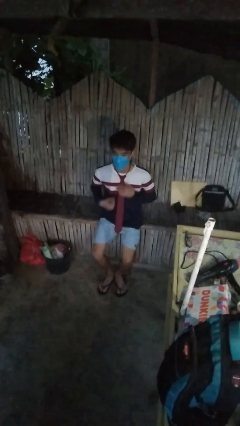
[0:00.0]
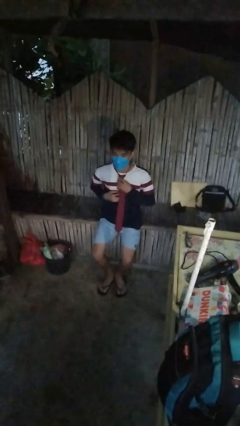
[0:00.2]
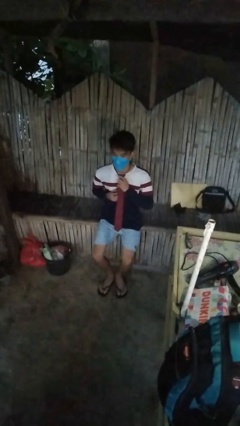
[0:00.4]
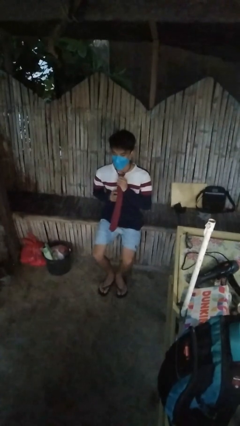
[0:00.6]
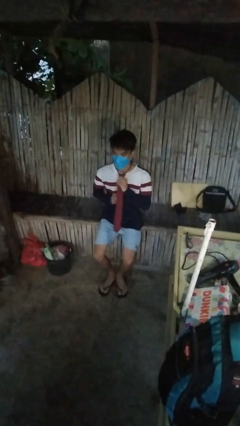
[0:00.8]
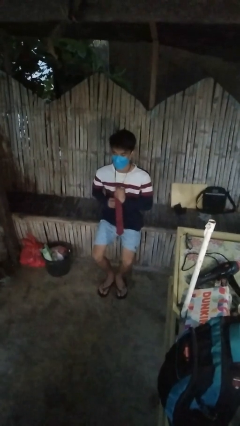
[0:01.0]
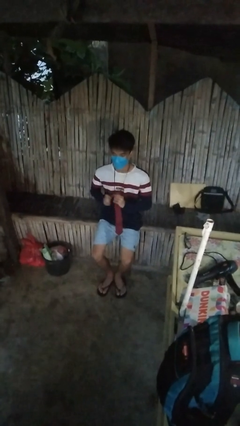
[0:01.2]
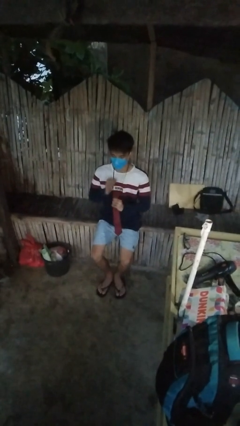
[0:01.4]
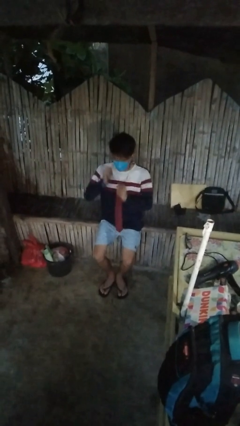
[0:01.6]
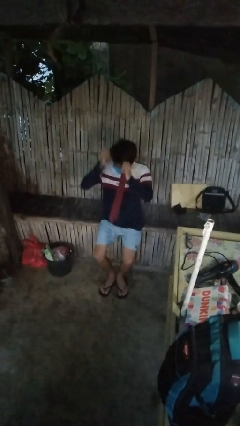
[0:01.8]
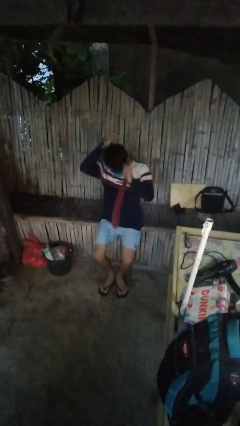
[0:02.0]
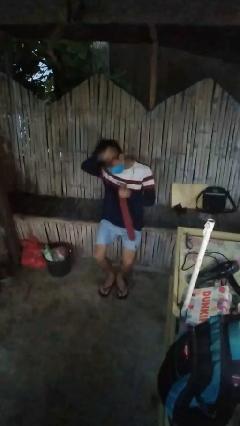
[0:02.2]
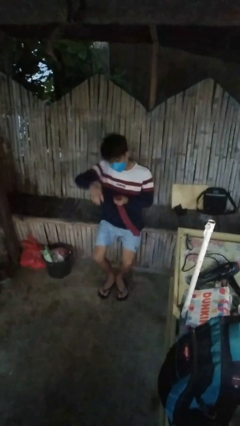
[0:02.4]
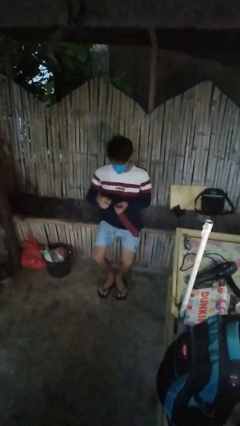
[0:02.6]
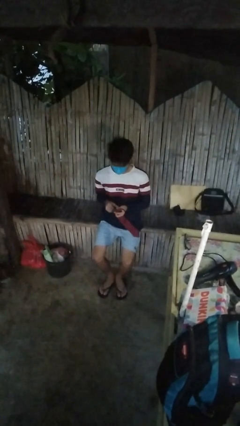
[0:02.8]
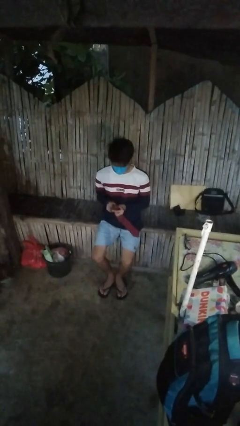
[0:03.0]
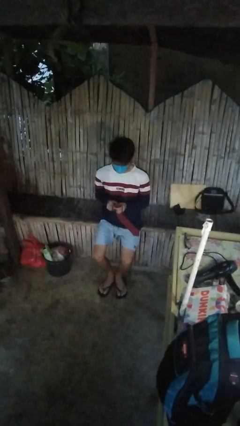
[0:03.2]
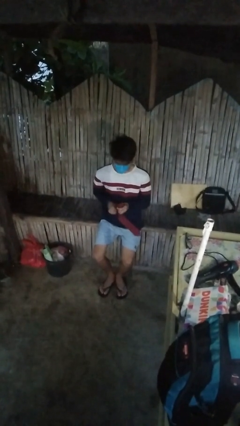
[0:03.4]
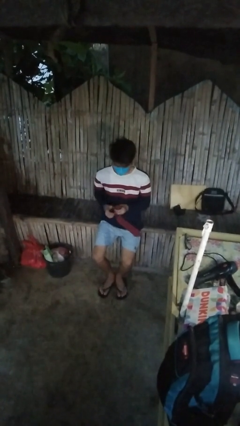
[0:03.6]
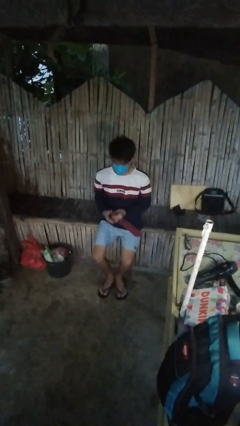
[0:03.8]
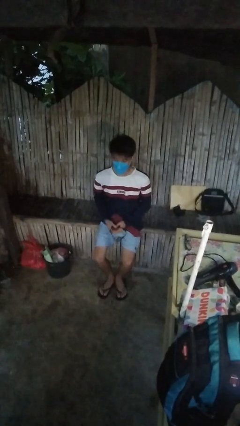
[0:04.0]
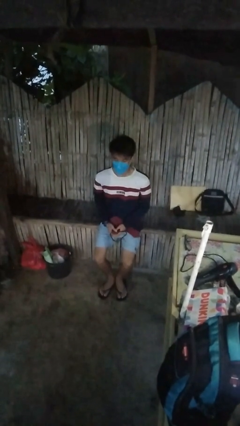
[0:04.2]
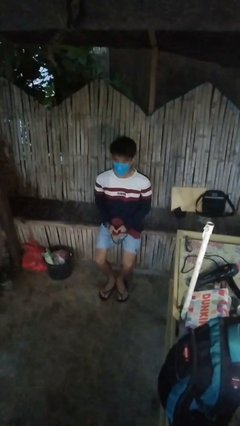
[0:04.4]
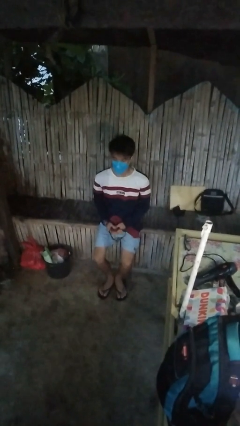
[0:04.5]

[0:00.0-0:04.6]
person takes off necktie

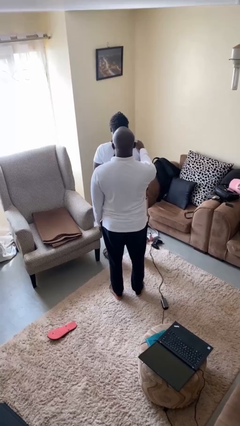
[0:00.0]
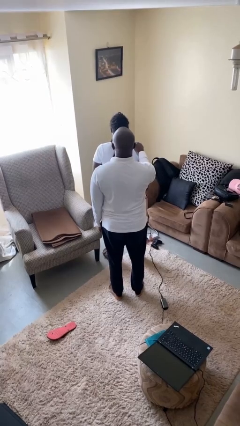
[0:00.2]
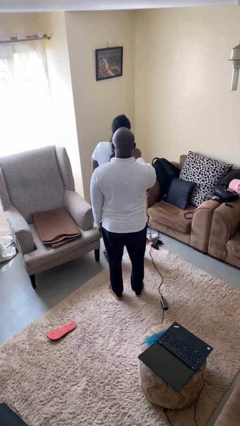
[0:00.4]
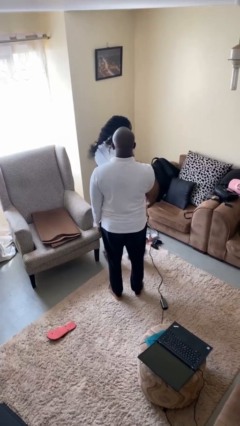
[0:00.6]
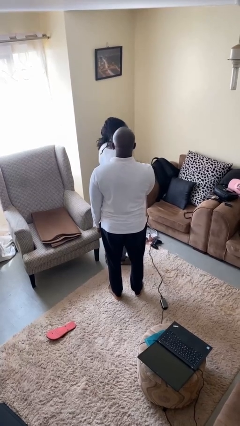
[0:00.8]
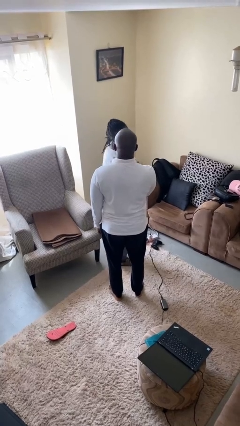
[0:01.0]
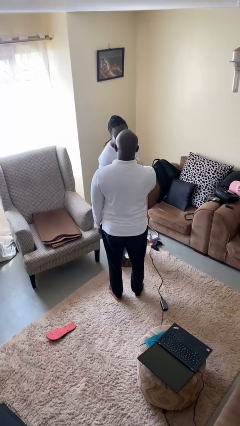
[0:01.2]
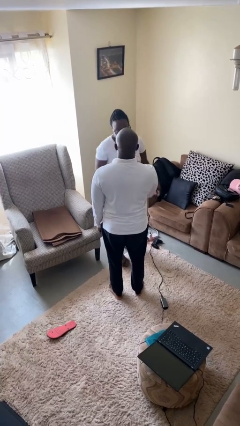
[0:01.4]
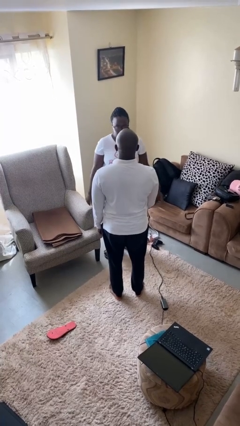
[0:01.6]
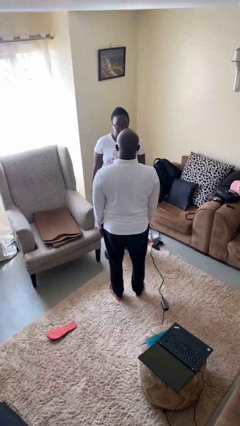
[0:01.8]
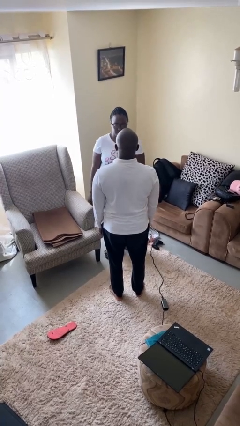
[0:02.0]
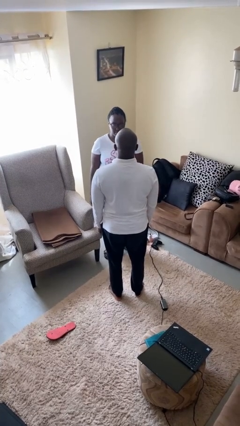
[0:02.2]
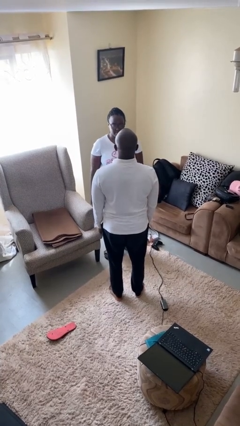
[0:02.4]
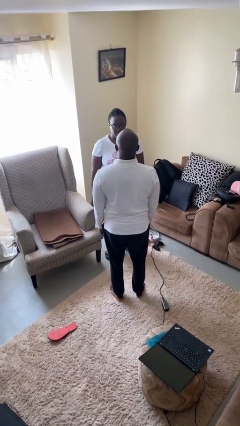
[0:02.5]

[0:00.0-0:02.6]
person spins person around

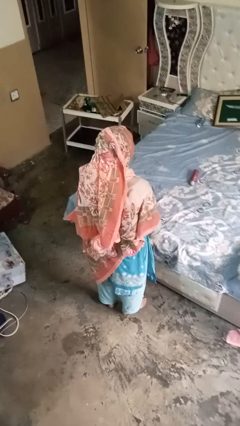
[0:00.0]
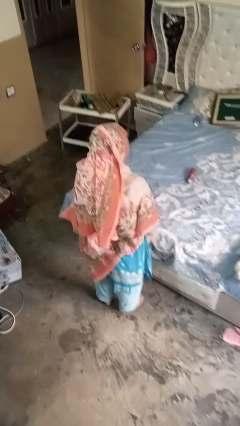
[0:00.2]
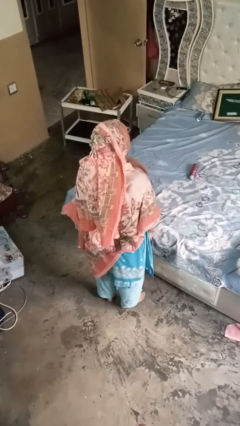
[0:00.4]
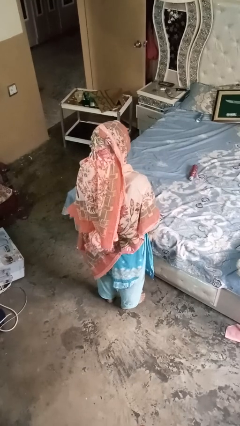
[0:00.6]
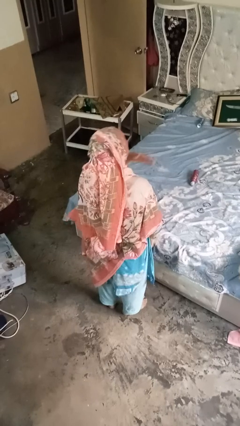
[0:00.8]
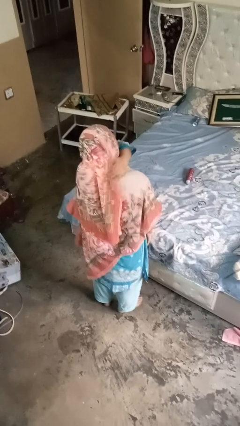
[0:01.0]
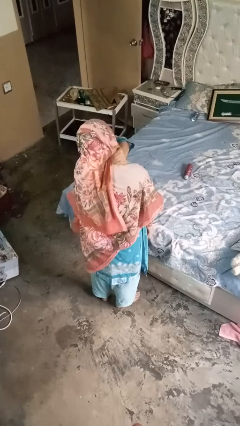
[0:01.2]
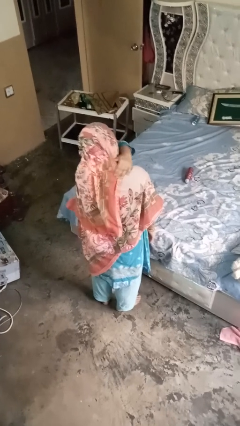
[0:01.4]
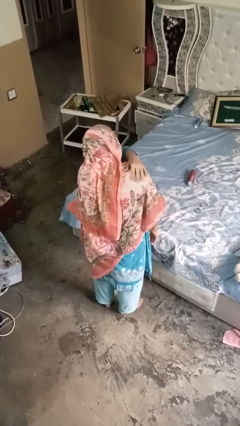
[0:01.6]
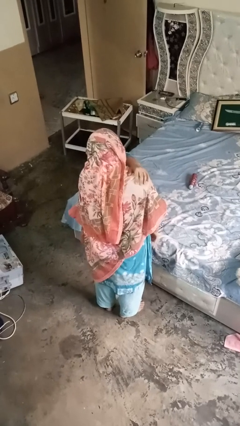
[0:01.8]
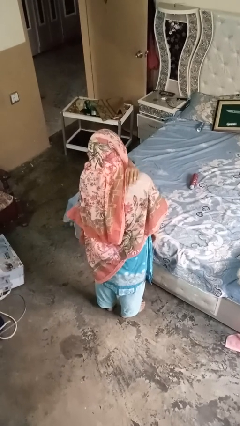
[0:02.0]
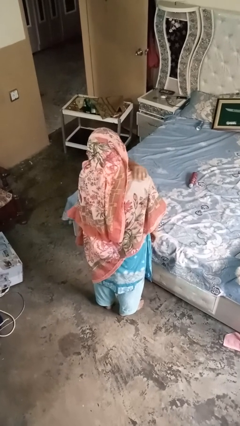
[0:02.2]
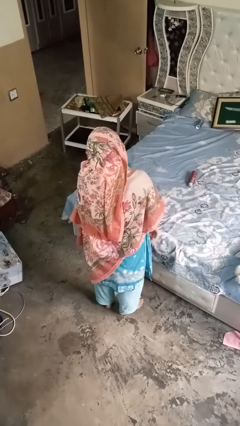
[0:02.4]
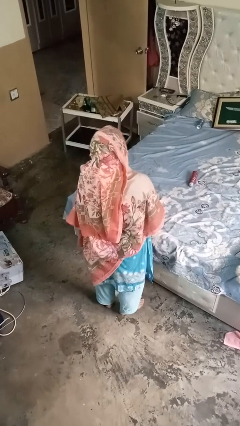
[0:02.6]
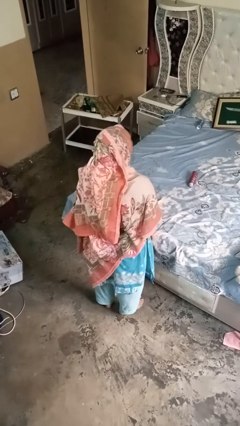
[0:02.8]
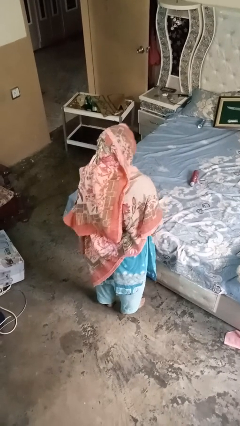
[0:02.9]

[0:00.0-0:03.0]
person swats bug

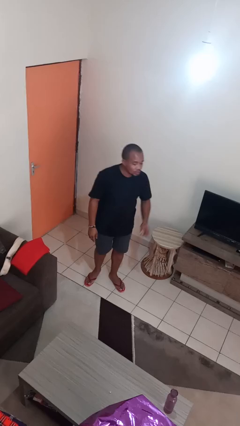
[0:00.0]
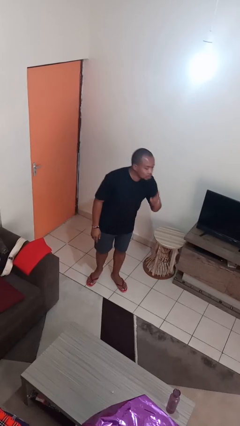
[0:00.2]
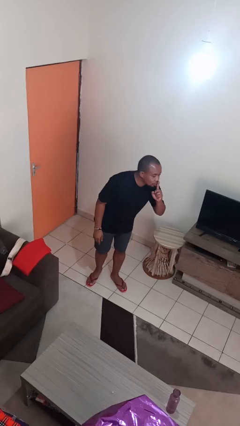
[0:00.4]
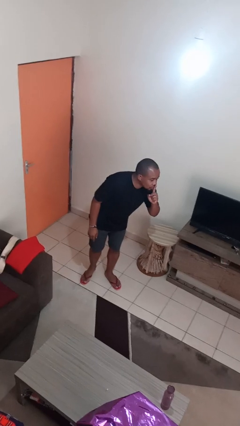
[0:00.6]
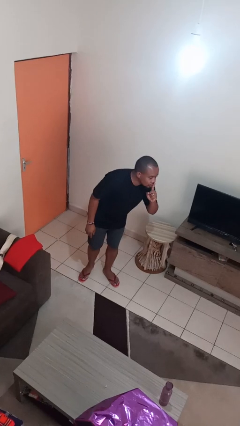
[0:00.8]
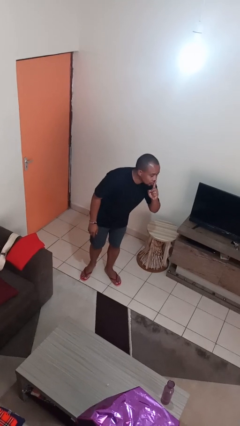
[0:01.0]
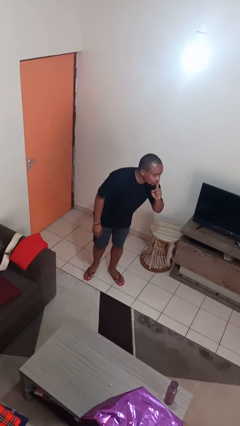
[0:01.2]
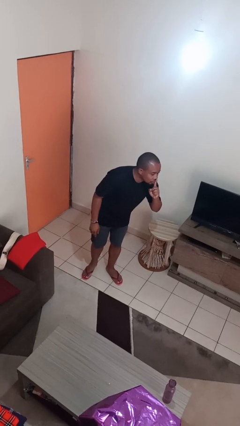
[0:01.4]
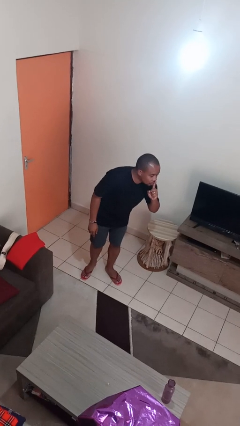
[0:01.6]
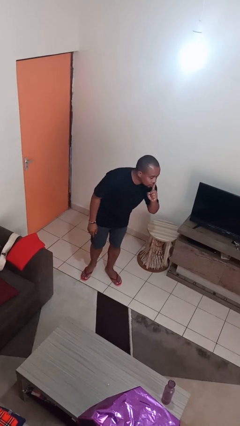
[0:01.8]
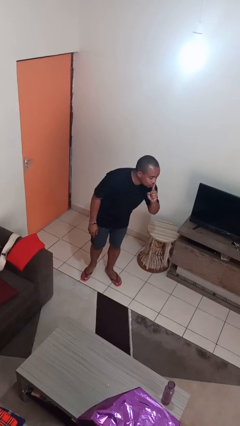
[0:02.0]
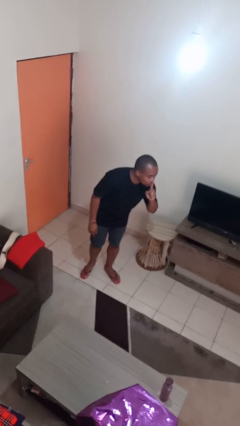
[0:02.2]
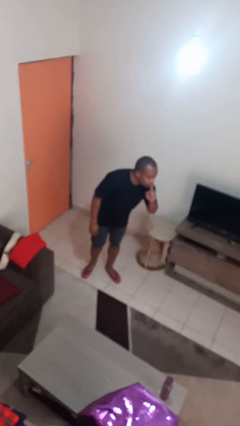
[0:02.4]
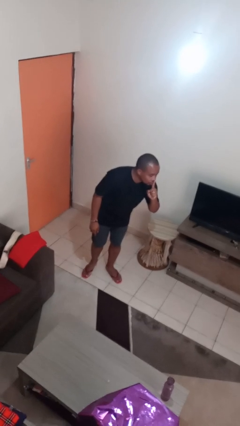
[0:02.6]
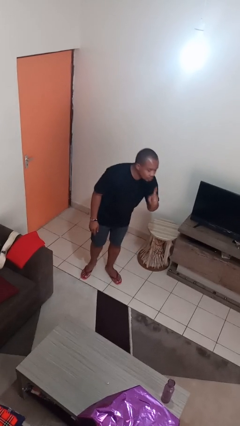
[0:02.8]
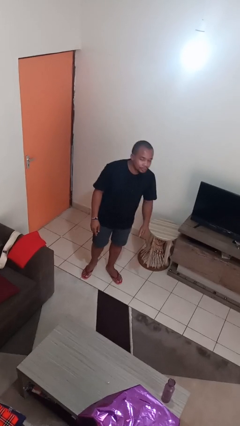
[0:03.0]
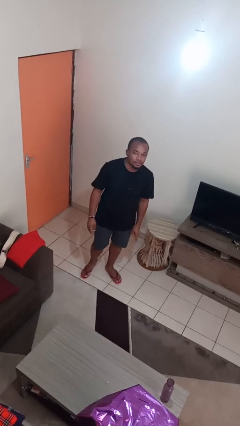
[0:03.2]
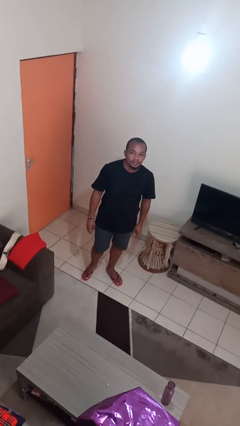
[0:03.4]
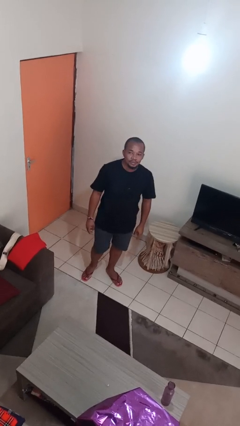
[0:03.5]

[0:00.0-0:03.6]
person gestures be quiet

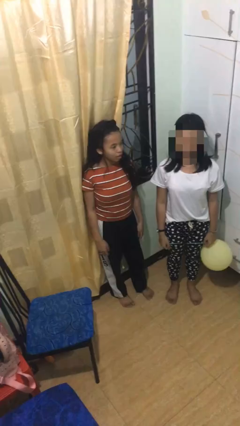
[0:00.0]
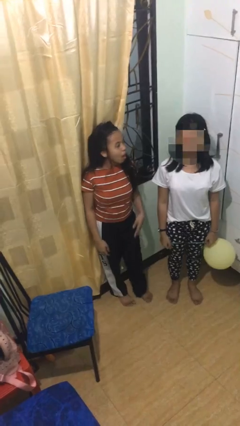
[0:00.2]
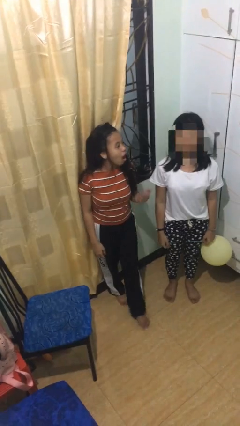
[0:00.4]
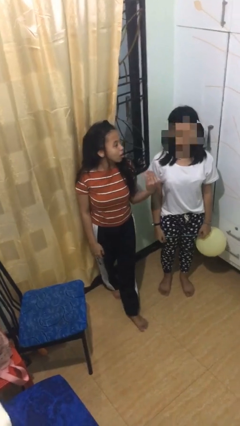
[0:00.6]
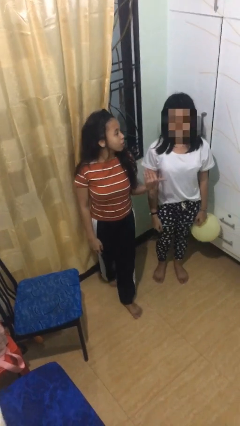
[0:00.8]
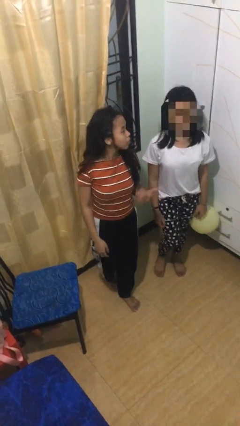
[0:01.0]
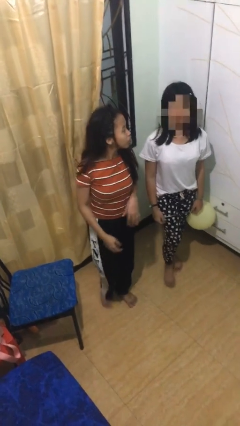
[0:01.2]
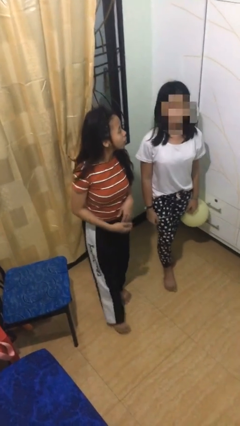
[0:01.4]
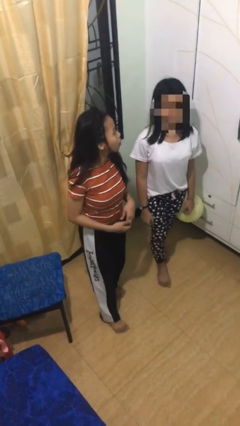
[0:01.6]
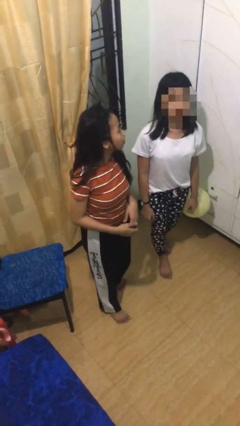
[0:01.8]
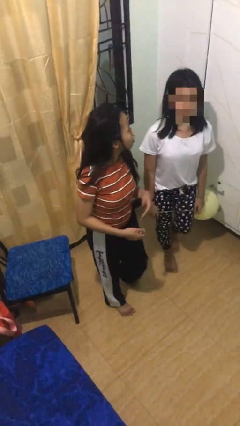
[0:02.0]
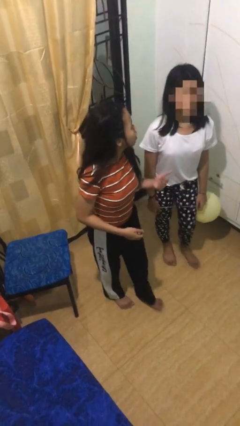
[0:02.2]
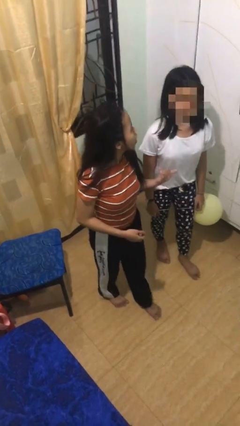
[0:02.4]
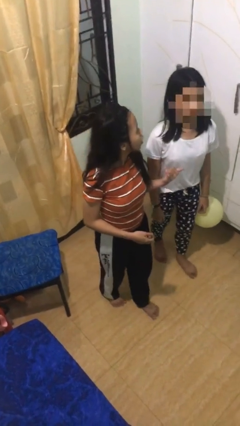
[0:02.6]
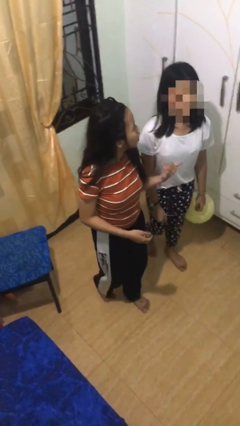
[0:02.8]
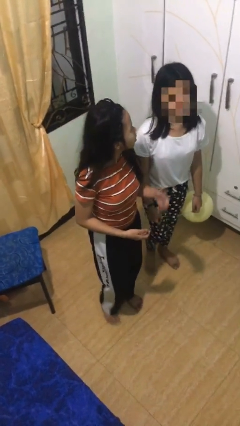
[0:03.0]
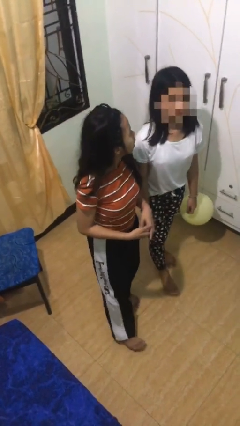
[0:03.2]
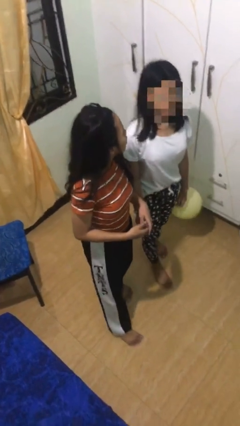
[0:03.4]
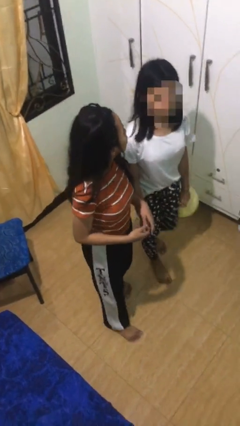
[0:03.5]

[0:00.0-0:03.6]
person talks to person
